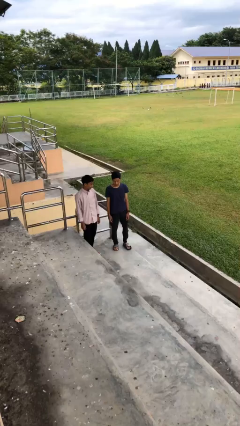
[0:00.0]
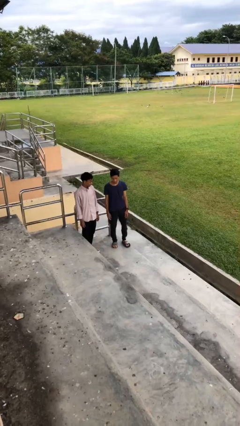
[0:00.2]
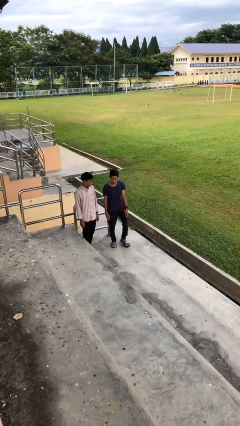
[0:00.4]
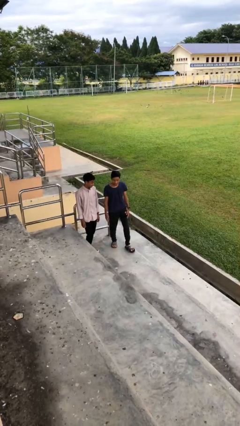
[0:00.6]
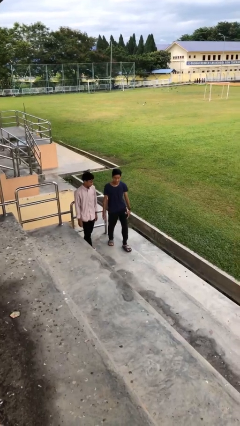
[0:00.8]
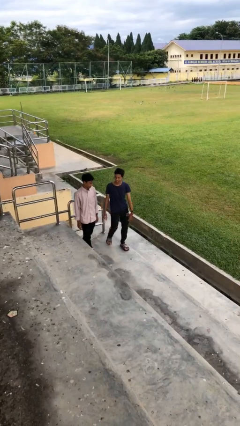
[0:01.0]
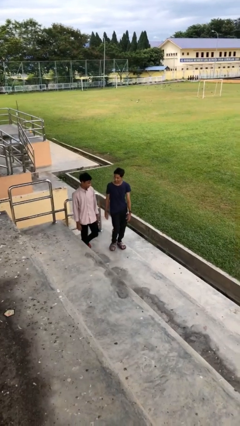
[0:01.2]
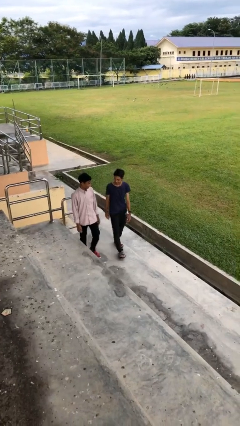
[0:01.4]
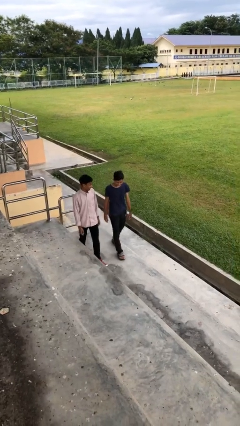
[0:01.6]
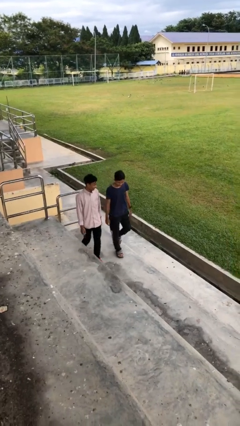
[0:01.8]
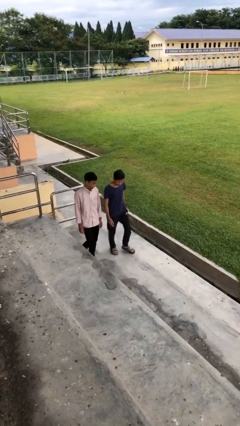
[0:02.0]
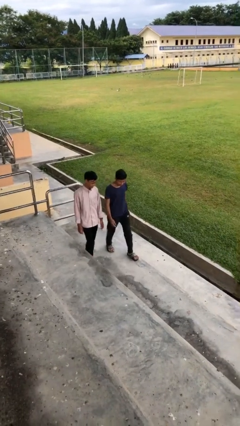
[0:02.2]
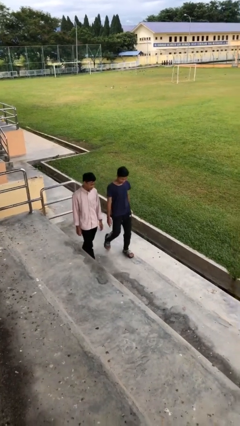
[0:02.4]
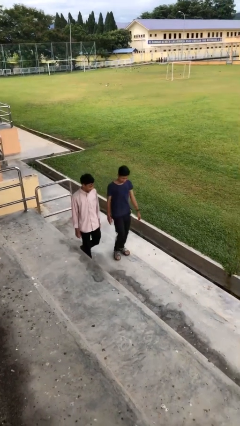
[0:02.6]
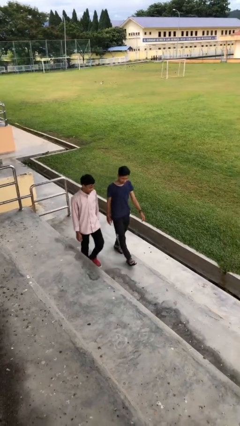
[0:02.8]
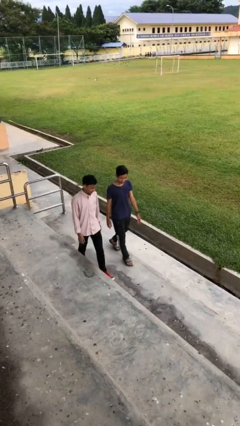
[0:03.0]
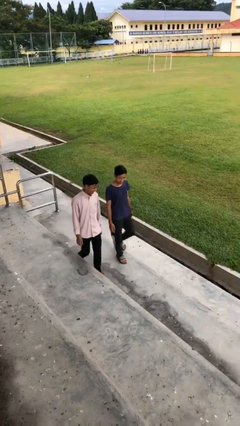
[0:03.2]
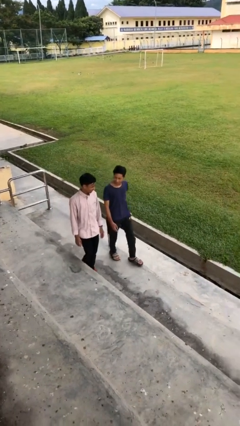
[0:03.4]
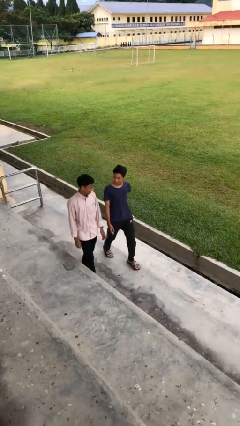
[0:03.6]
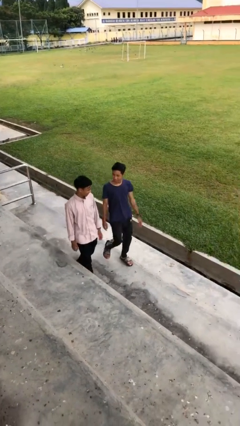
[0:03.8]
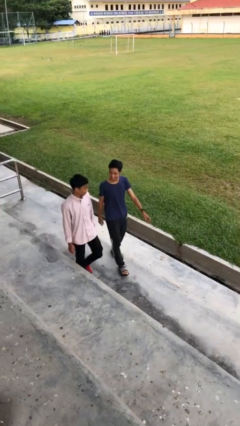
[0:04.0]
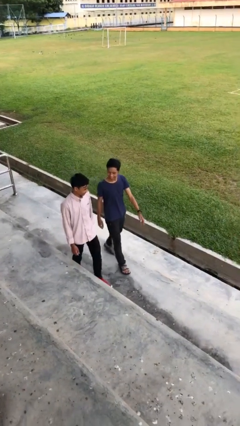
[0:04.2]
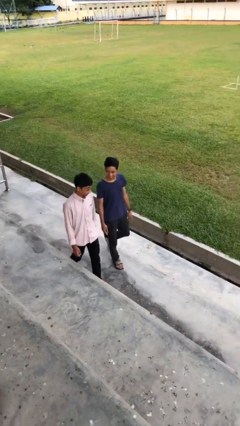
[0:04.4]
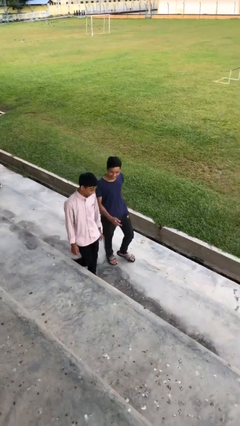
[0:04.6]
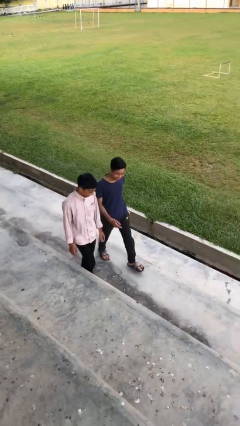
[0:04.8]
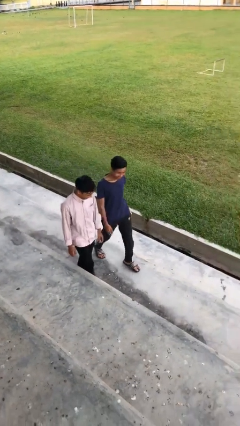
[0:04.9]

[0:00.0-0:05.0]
person talks to person

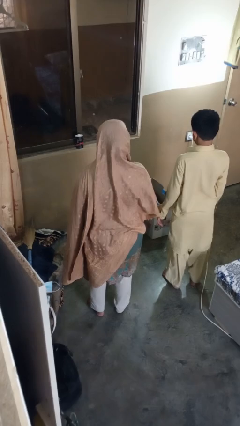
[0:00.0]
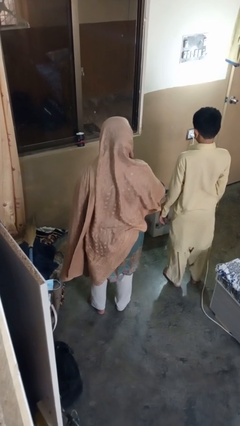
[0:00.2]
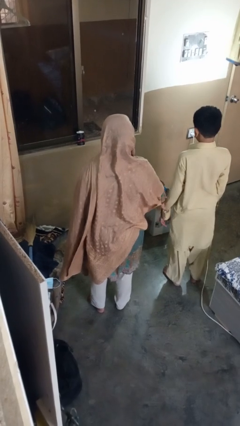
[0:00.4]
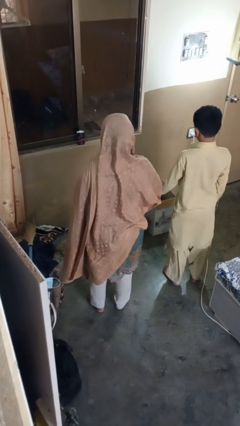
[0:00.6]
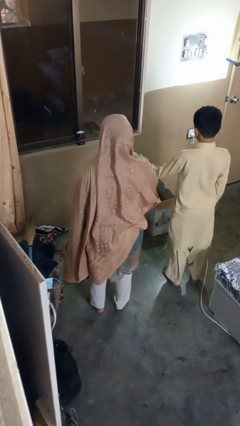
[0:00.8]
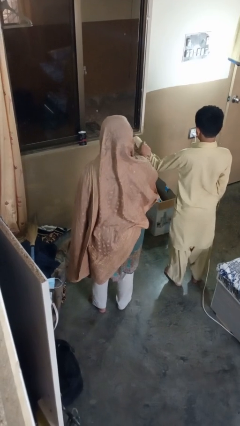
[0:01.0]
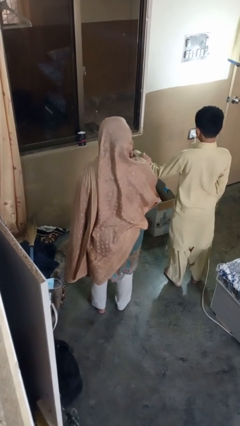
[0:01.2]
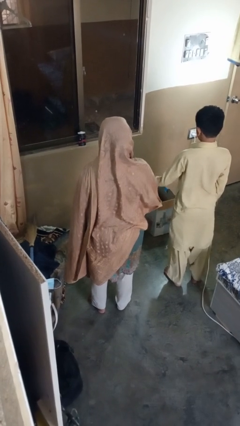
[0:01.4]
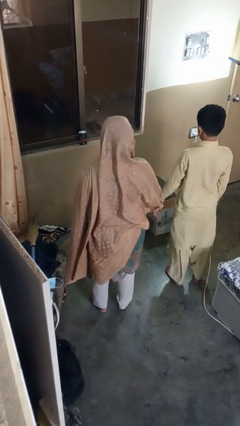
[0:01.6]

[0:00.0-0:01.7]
person grabs person by forearm

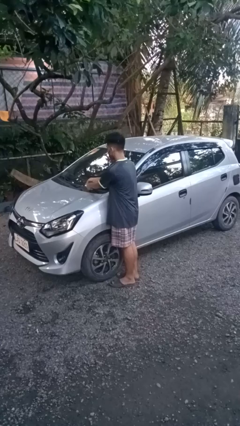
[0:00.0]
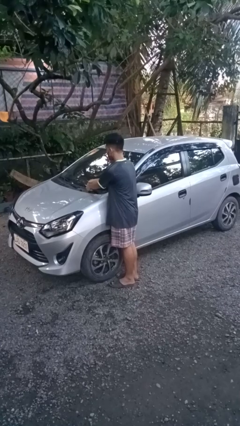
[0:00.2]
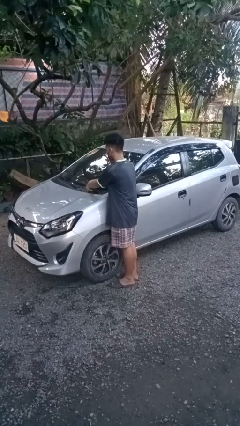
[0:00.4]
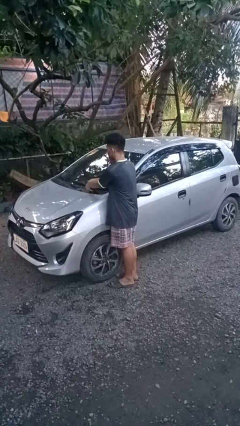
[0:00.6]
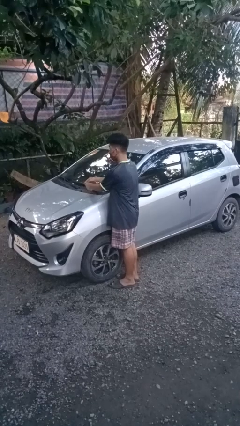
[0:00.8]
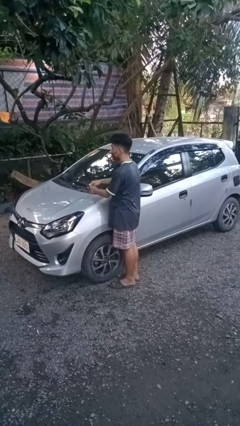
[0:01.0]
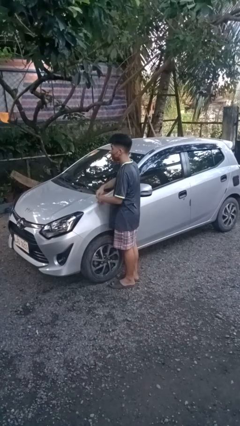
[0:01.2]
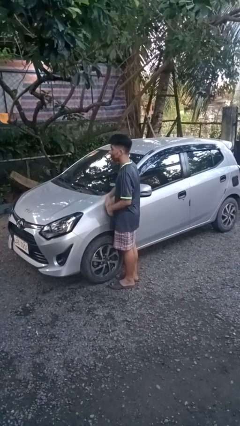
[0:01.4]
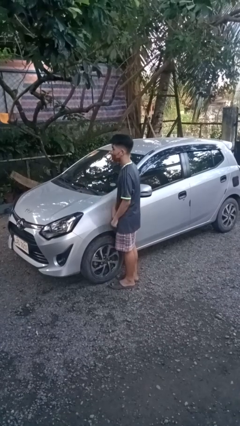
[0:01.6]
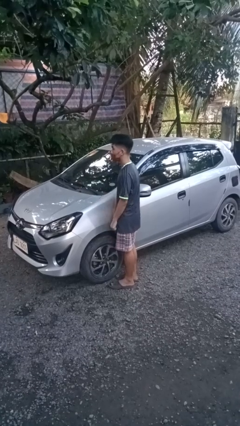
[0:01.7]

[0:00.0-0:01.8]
person flips down car wipers

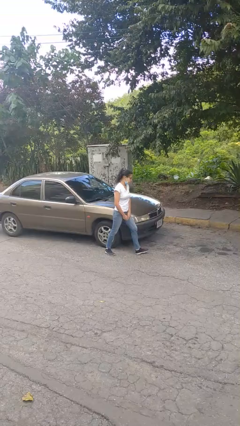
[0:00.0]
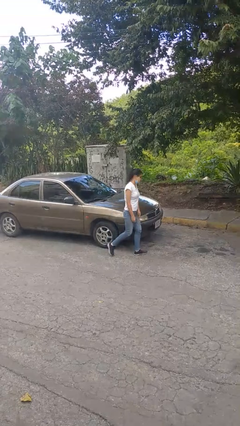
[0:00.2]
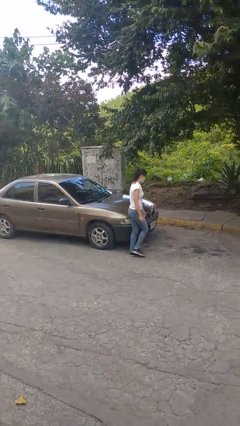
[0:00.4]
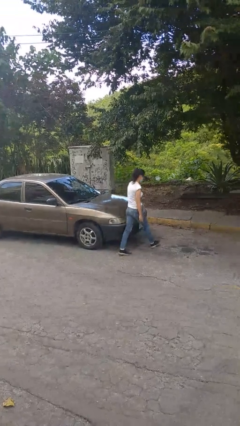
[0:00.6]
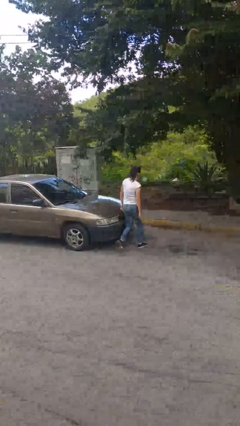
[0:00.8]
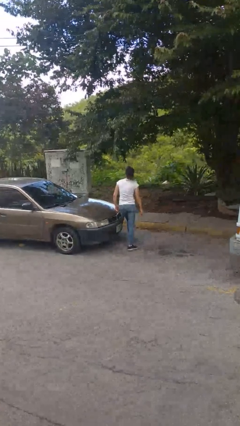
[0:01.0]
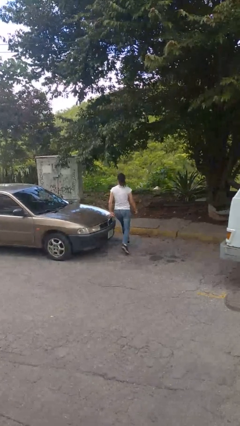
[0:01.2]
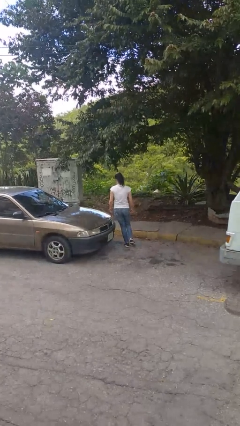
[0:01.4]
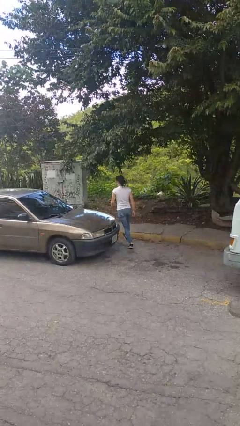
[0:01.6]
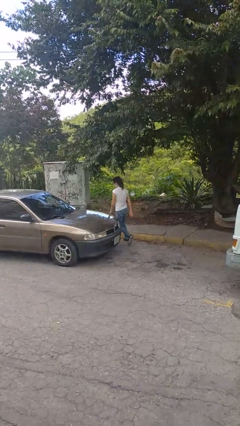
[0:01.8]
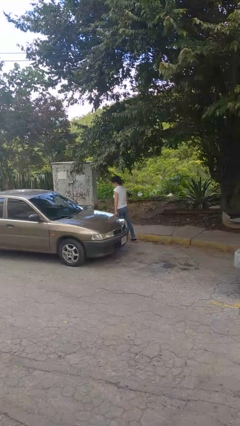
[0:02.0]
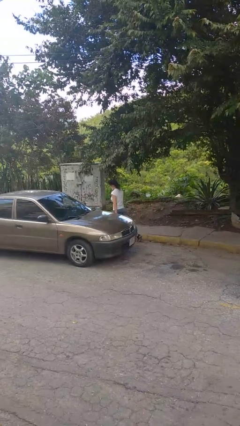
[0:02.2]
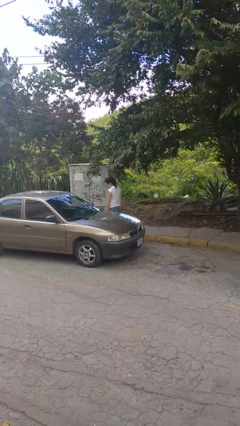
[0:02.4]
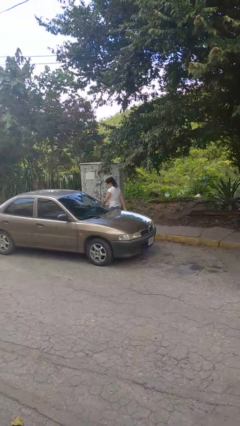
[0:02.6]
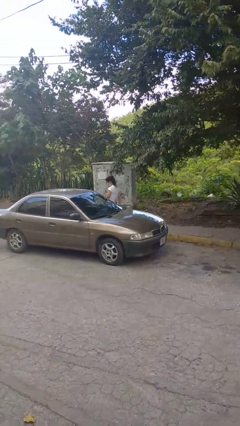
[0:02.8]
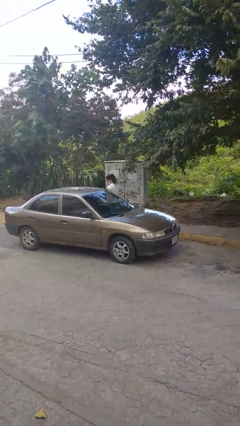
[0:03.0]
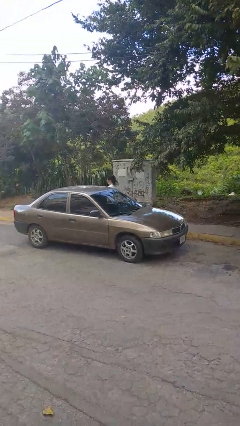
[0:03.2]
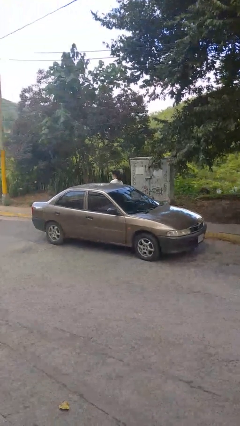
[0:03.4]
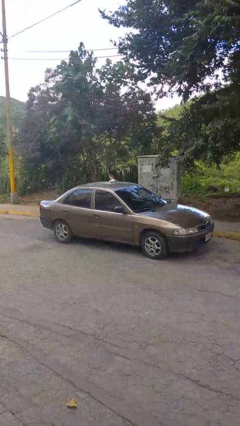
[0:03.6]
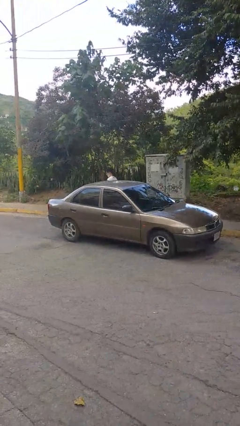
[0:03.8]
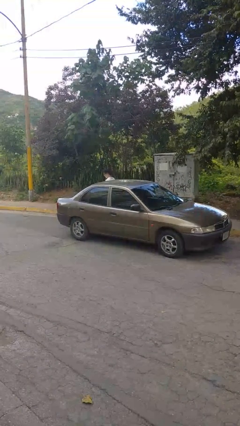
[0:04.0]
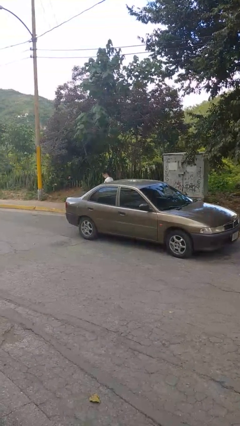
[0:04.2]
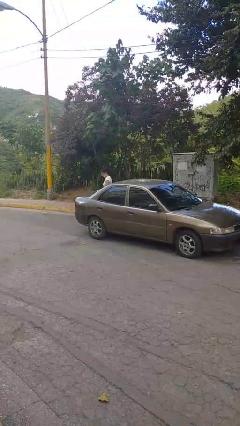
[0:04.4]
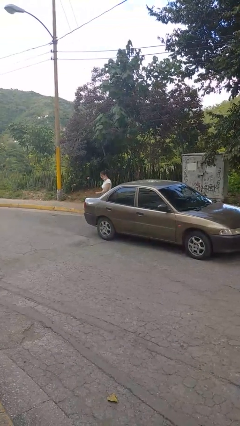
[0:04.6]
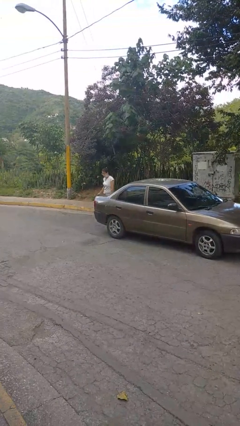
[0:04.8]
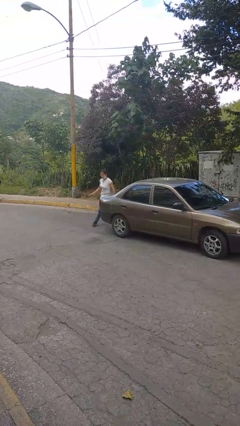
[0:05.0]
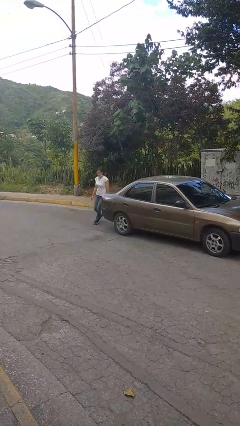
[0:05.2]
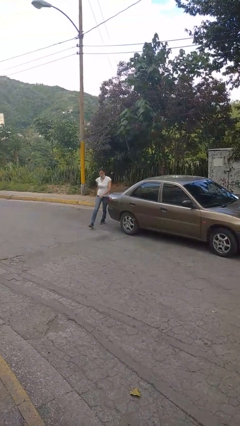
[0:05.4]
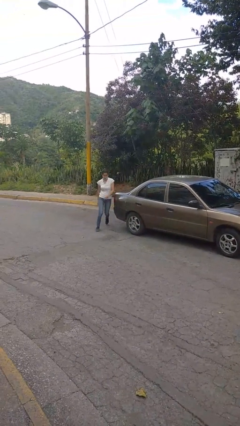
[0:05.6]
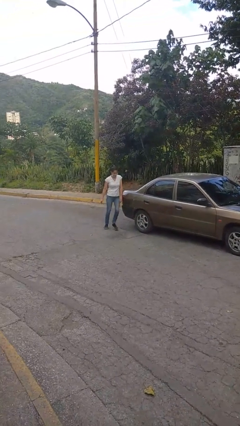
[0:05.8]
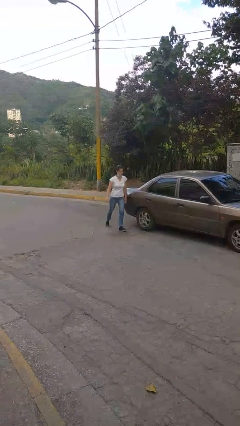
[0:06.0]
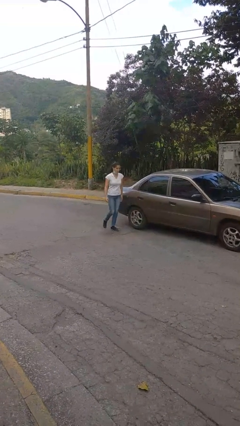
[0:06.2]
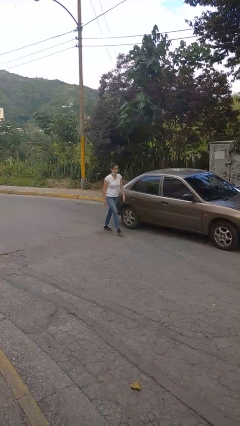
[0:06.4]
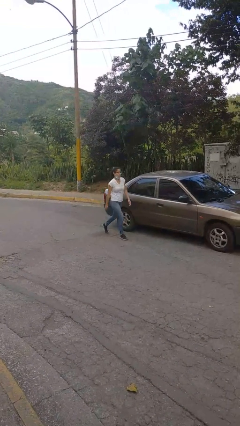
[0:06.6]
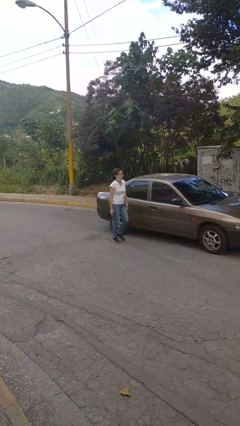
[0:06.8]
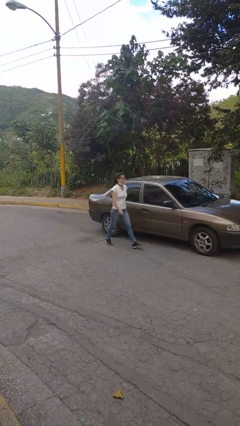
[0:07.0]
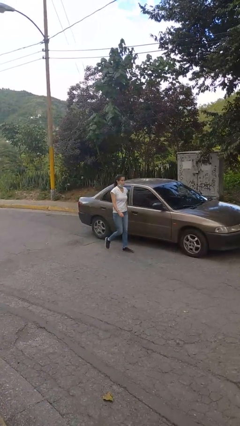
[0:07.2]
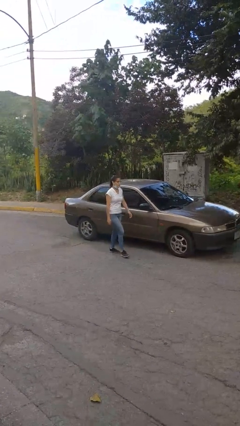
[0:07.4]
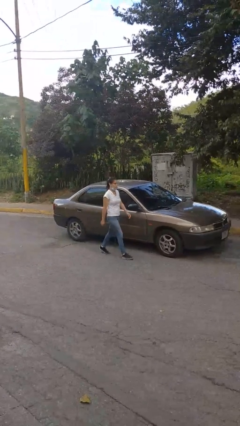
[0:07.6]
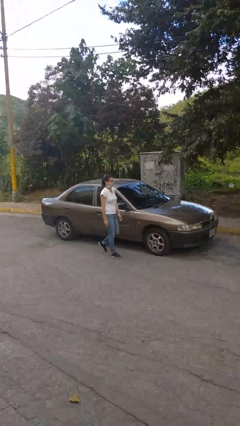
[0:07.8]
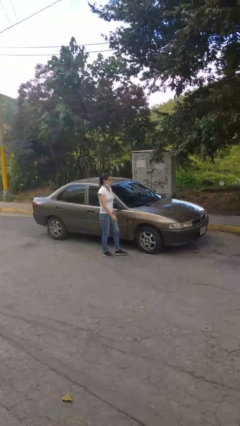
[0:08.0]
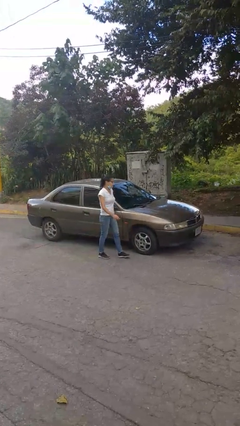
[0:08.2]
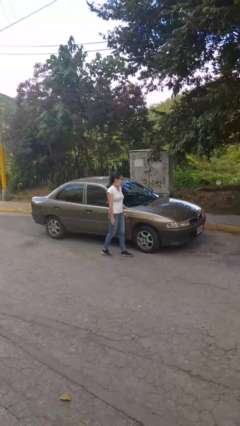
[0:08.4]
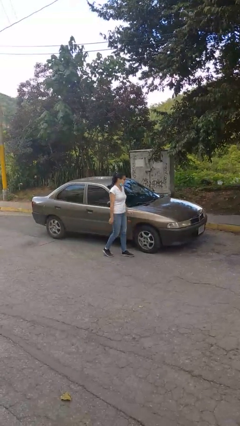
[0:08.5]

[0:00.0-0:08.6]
person walks around car

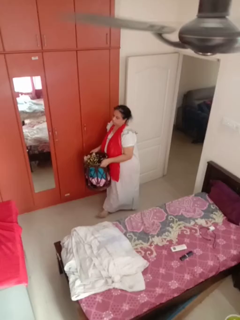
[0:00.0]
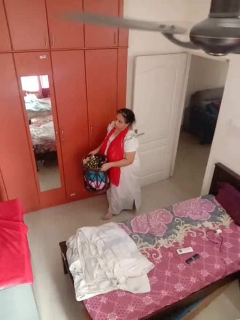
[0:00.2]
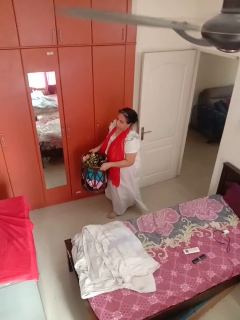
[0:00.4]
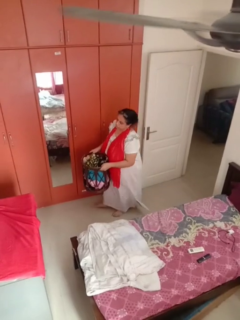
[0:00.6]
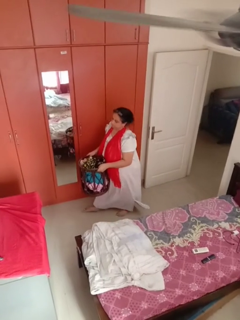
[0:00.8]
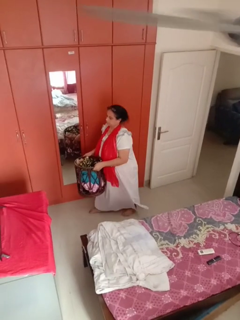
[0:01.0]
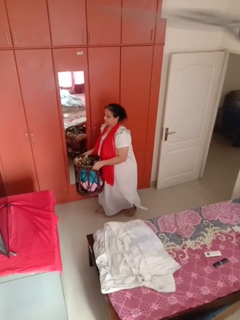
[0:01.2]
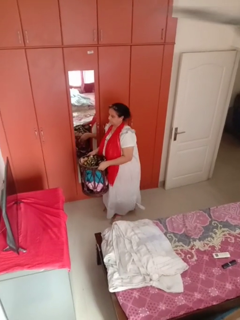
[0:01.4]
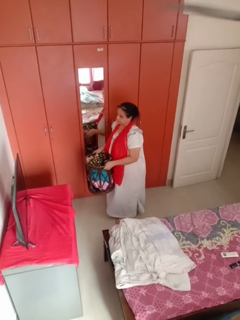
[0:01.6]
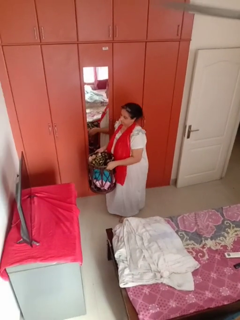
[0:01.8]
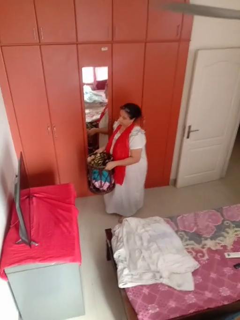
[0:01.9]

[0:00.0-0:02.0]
person carries laundry basket
